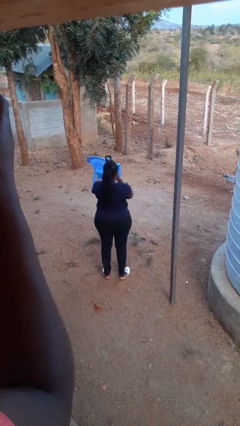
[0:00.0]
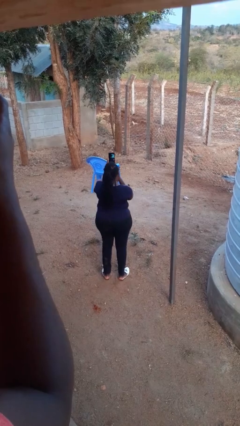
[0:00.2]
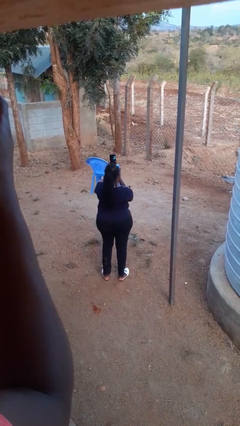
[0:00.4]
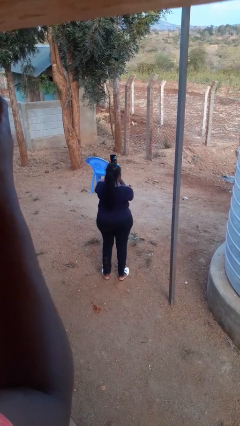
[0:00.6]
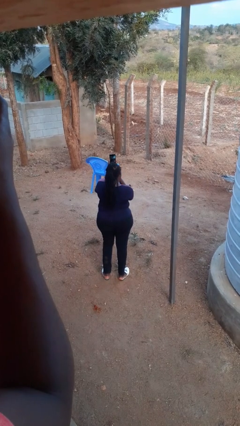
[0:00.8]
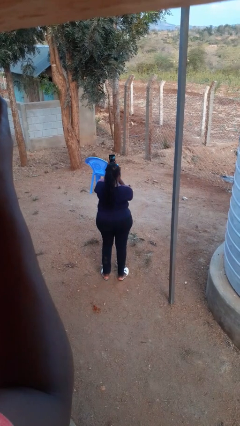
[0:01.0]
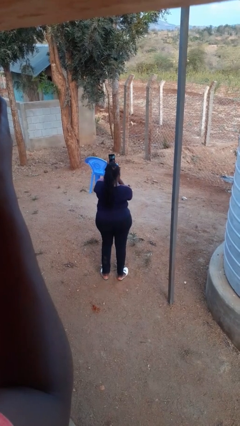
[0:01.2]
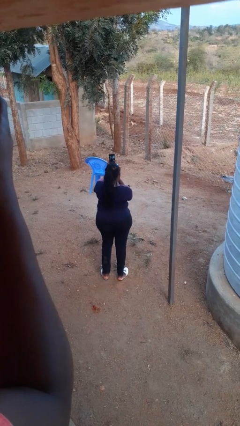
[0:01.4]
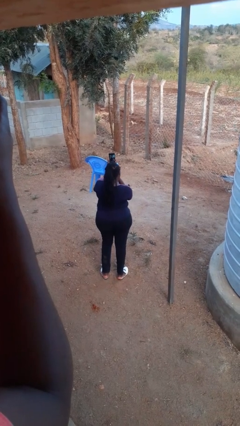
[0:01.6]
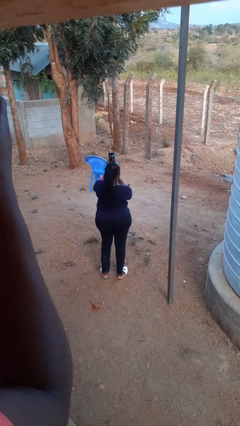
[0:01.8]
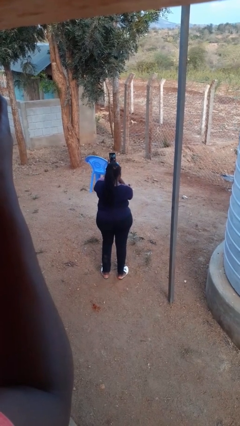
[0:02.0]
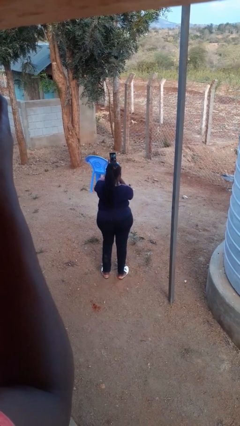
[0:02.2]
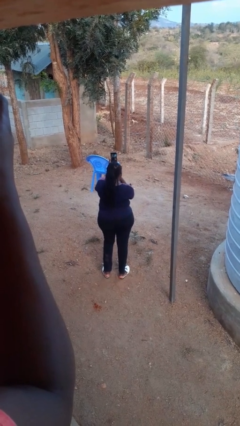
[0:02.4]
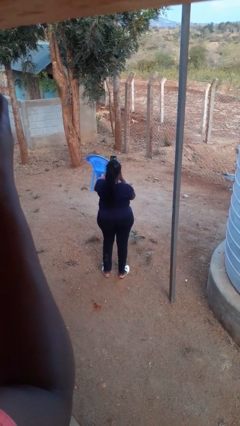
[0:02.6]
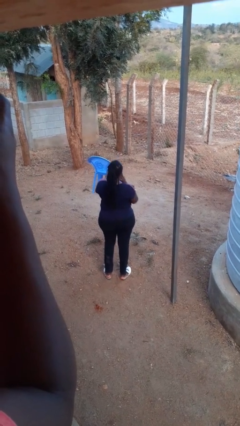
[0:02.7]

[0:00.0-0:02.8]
person takes selfie

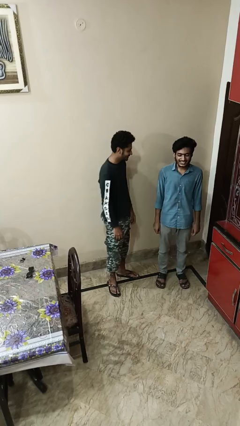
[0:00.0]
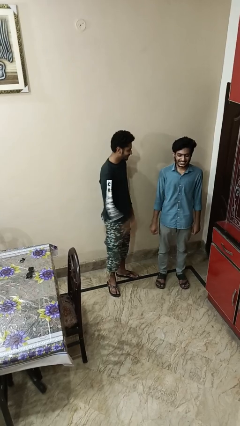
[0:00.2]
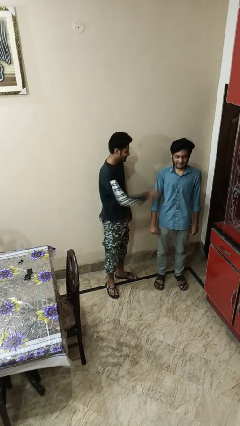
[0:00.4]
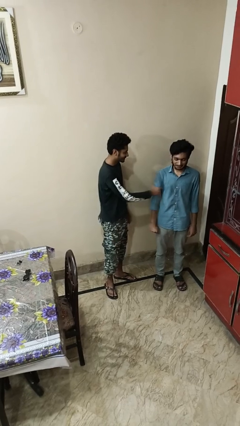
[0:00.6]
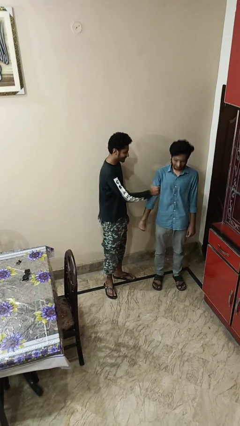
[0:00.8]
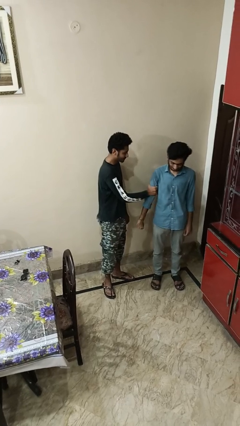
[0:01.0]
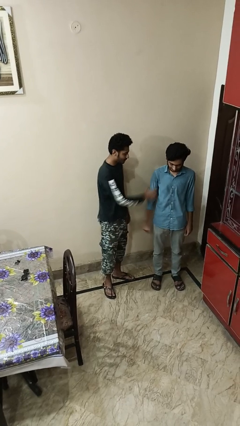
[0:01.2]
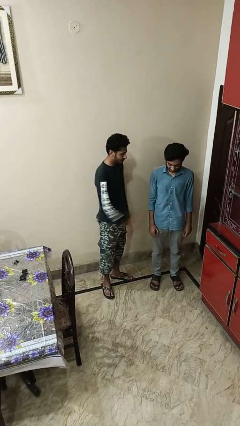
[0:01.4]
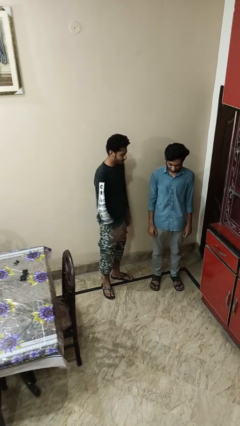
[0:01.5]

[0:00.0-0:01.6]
person grabs person by bicep

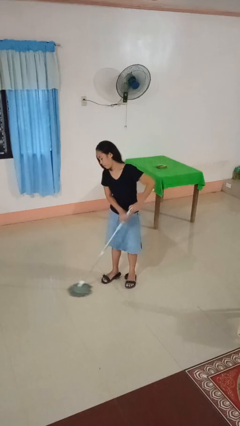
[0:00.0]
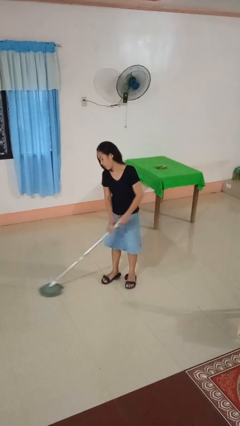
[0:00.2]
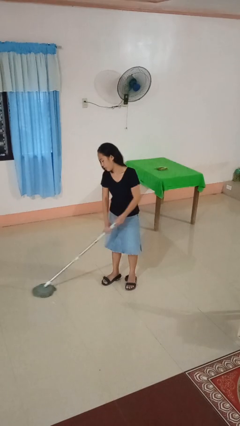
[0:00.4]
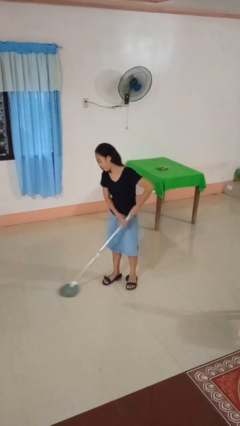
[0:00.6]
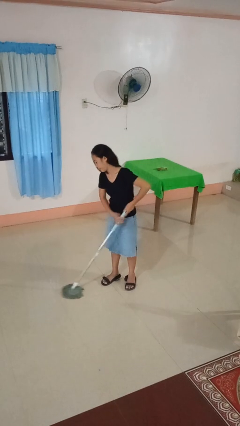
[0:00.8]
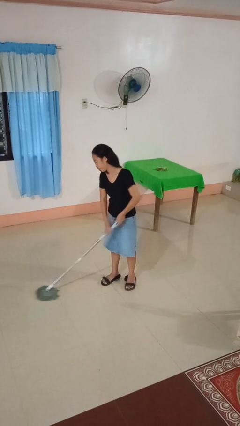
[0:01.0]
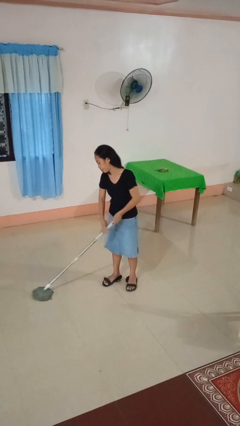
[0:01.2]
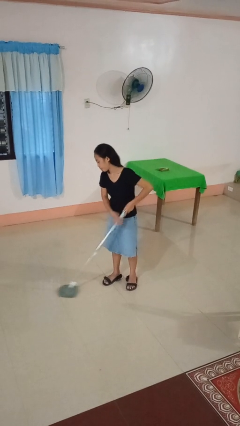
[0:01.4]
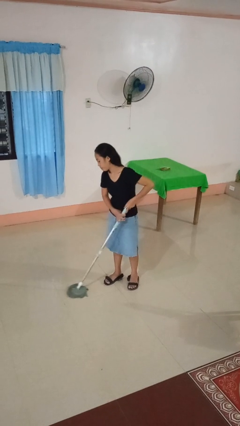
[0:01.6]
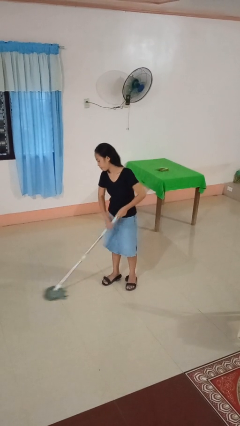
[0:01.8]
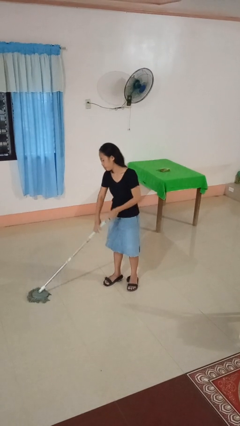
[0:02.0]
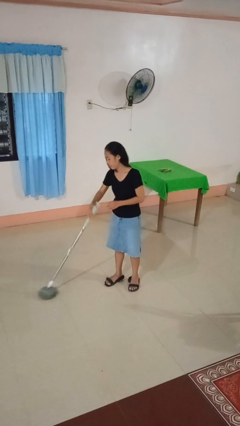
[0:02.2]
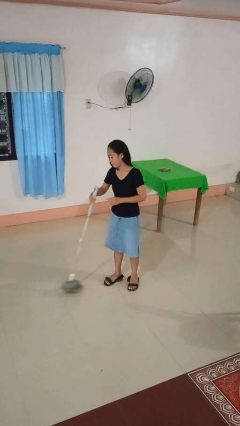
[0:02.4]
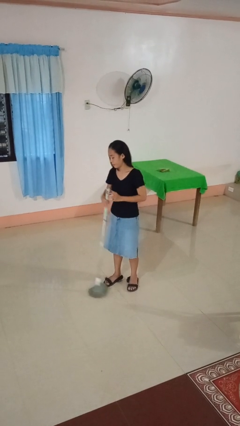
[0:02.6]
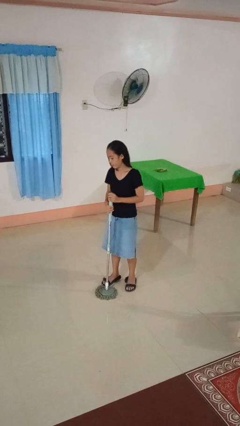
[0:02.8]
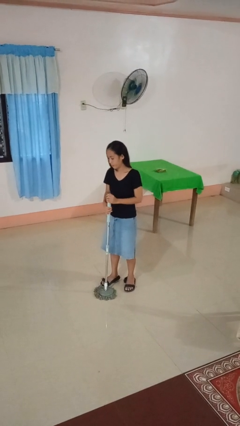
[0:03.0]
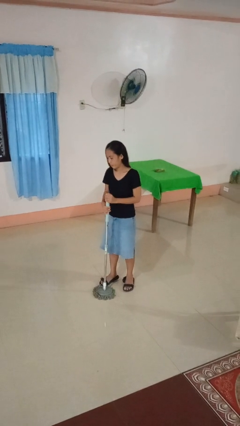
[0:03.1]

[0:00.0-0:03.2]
person mops

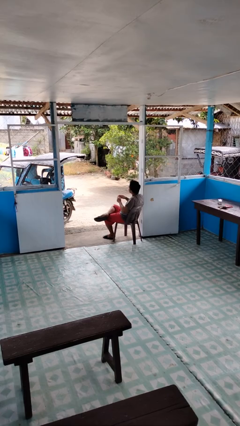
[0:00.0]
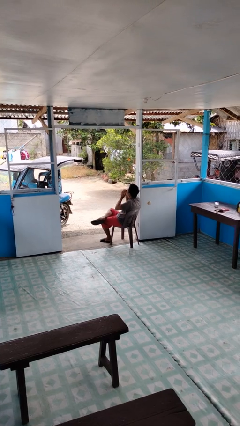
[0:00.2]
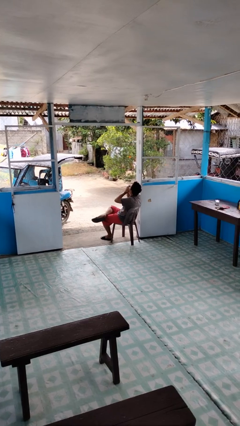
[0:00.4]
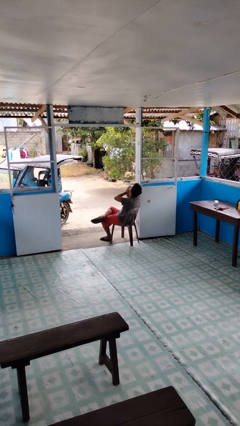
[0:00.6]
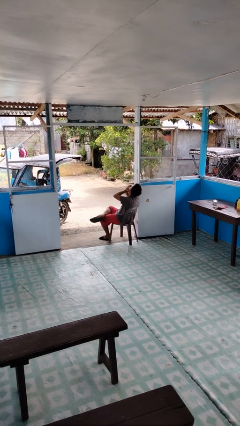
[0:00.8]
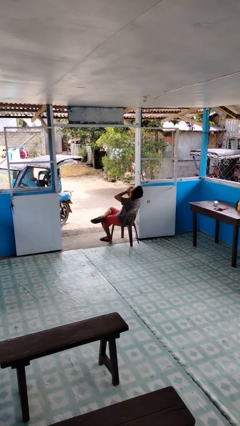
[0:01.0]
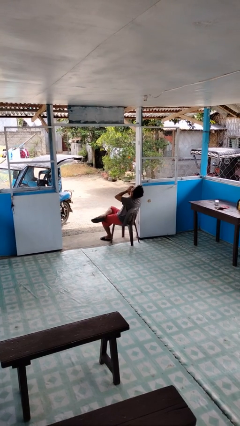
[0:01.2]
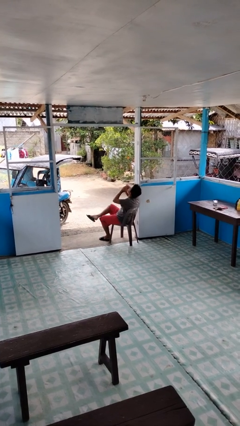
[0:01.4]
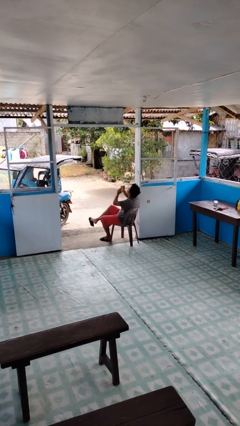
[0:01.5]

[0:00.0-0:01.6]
person yawns

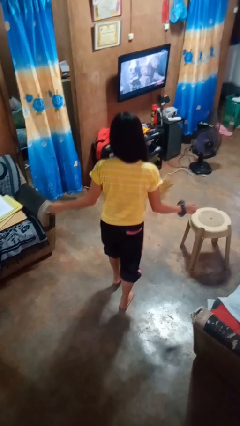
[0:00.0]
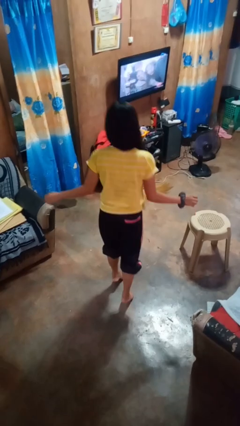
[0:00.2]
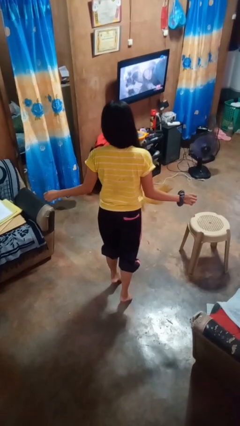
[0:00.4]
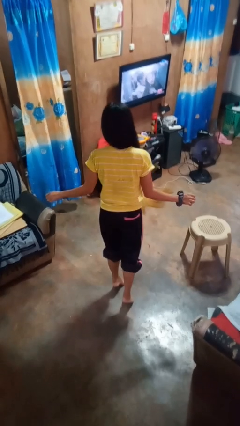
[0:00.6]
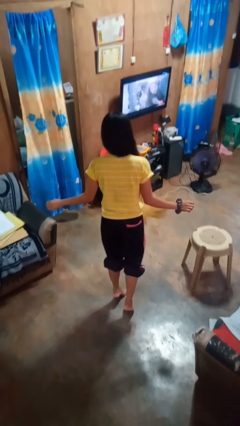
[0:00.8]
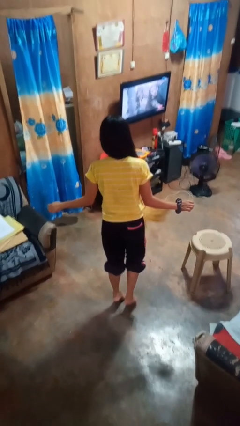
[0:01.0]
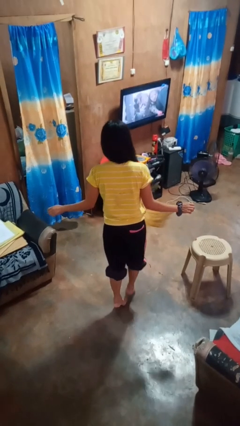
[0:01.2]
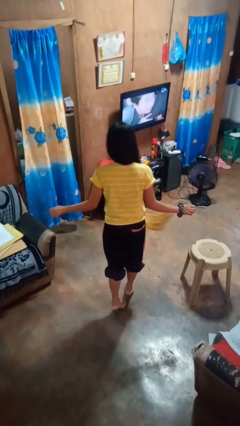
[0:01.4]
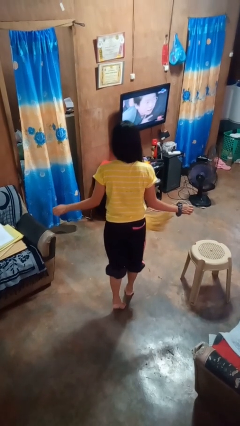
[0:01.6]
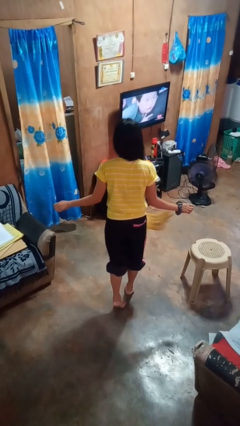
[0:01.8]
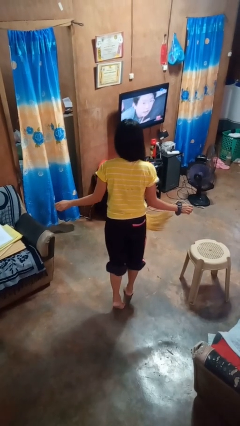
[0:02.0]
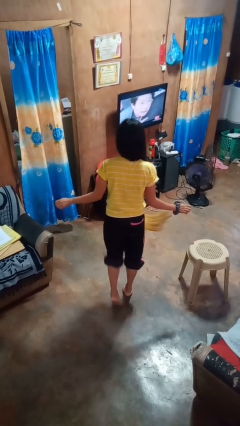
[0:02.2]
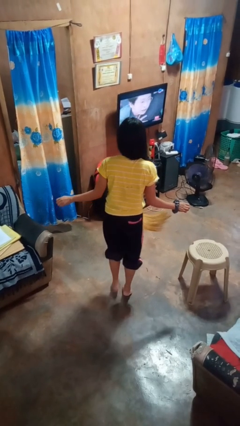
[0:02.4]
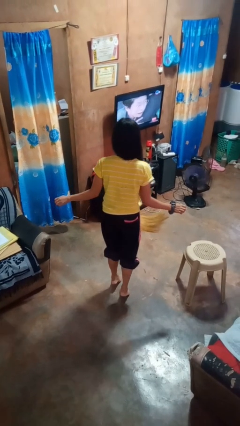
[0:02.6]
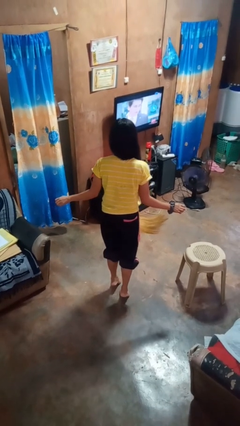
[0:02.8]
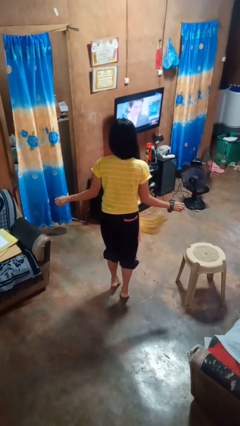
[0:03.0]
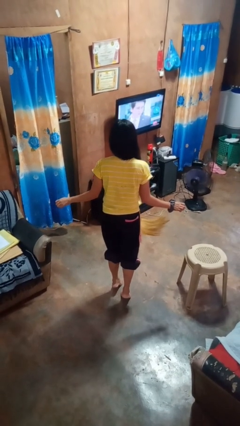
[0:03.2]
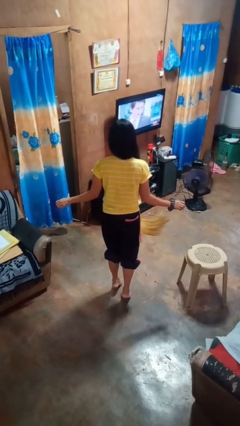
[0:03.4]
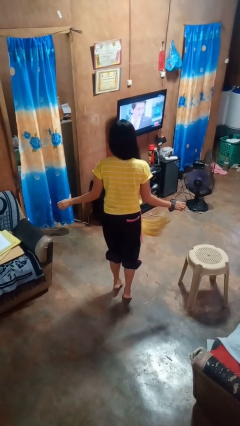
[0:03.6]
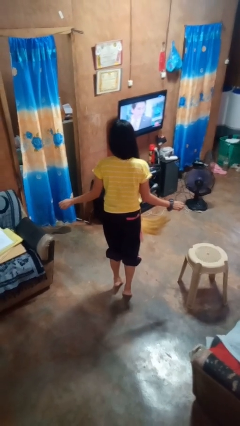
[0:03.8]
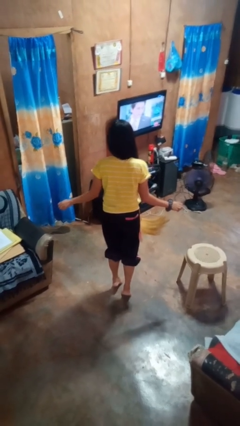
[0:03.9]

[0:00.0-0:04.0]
person walks tiptoe

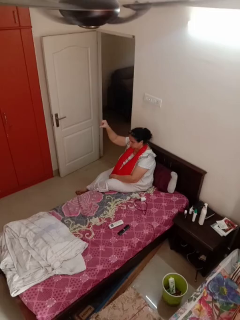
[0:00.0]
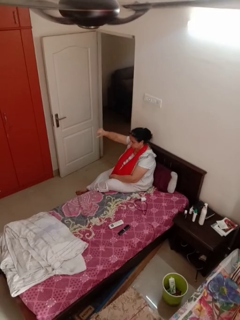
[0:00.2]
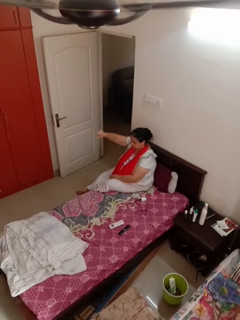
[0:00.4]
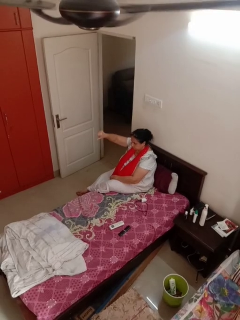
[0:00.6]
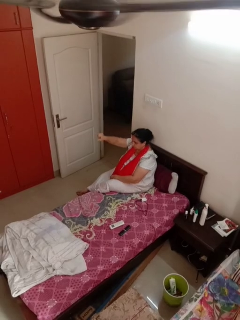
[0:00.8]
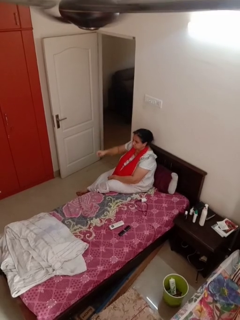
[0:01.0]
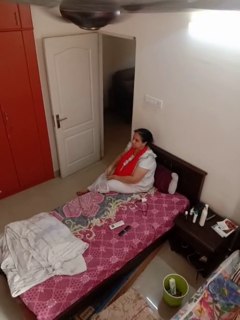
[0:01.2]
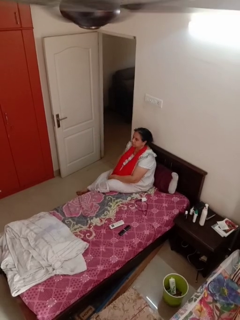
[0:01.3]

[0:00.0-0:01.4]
person gestures thumbs down

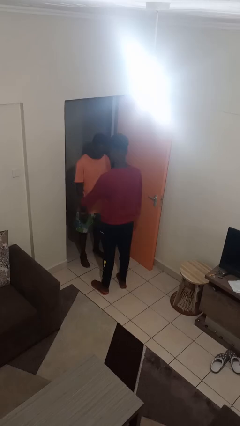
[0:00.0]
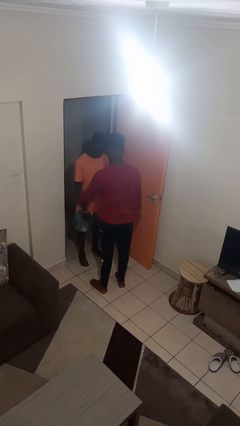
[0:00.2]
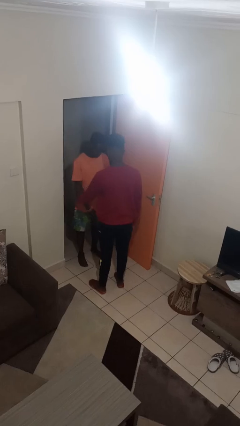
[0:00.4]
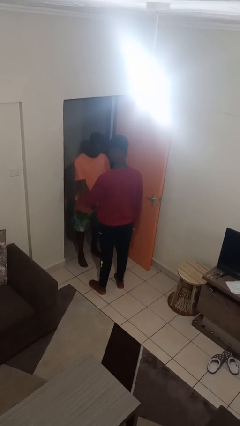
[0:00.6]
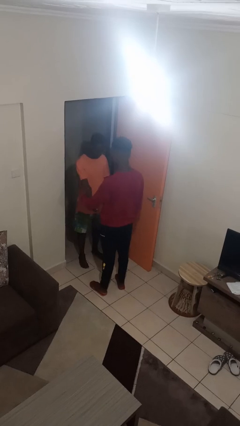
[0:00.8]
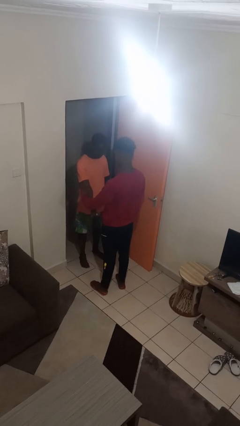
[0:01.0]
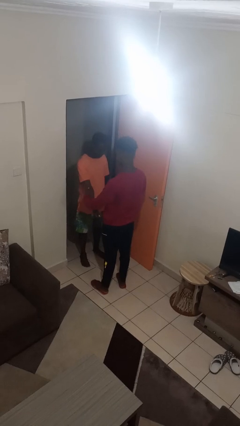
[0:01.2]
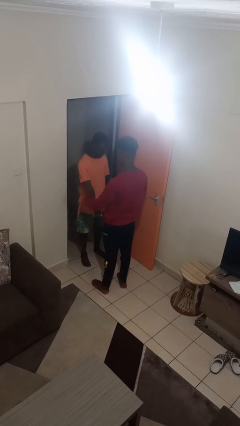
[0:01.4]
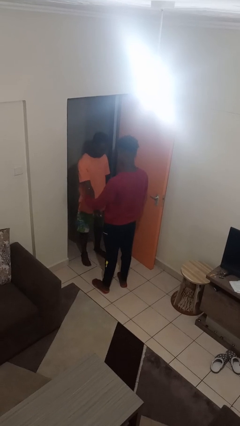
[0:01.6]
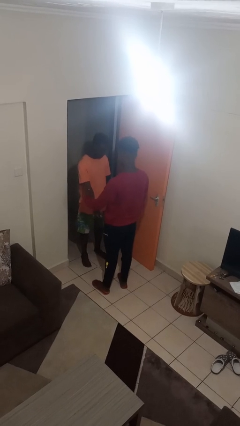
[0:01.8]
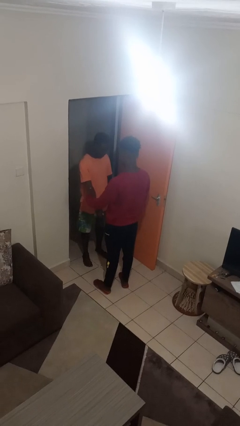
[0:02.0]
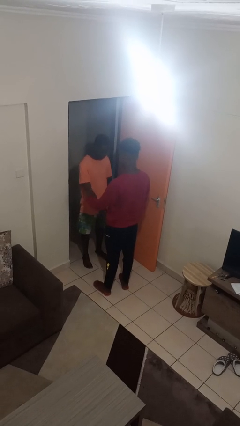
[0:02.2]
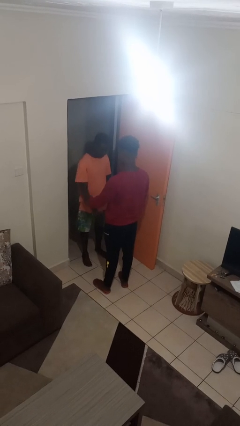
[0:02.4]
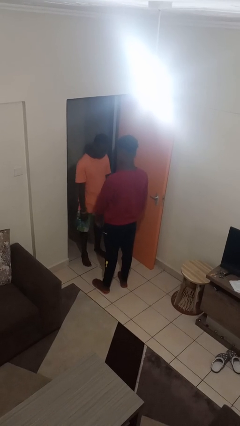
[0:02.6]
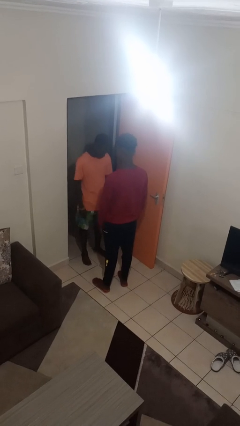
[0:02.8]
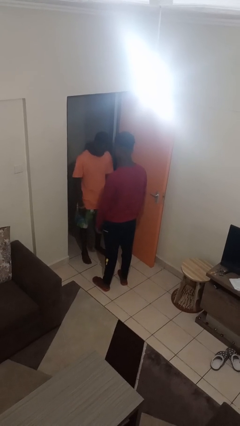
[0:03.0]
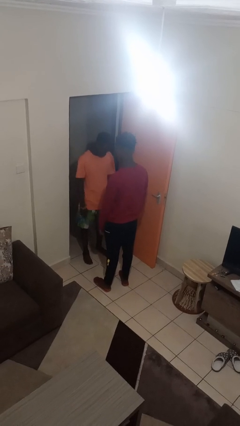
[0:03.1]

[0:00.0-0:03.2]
person grabs person by forearm
